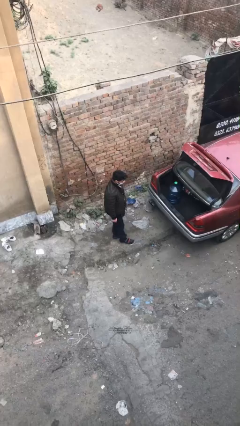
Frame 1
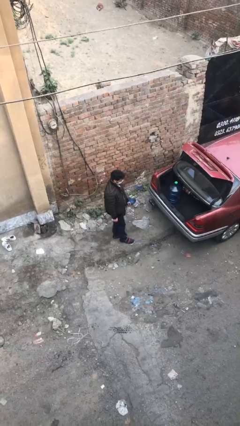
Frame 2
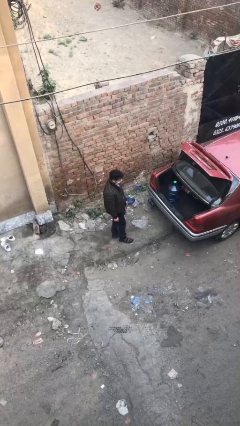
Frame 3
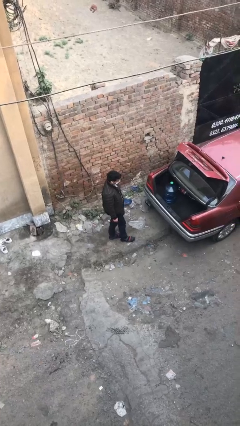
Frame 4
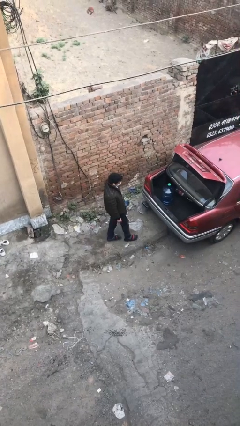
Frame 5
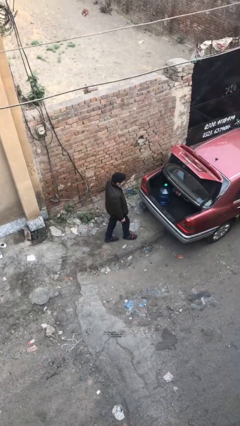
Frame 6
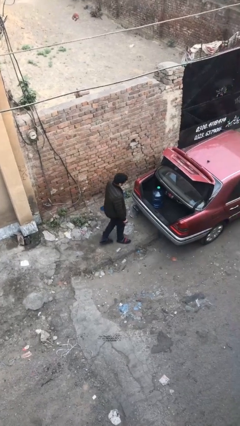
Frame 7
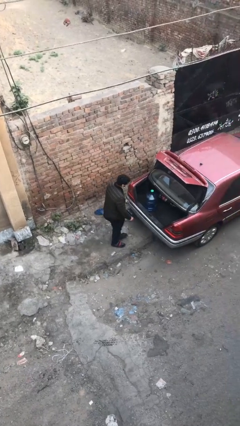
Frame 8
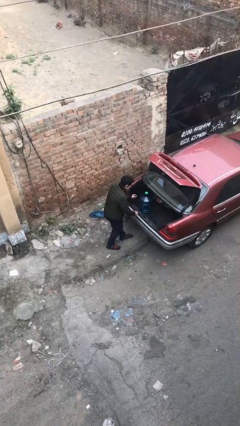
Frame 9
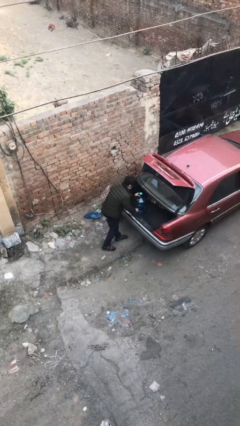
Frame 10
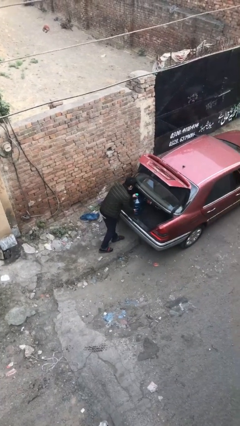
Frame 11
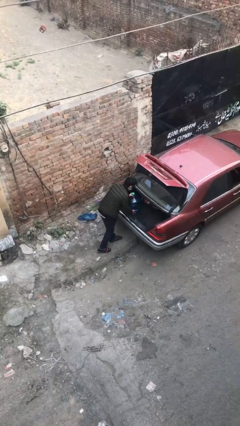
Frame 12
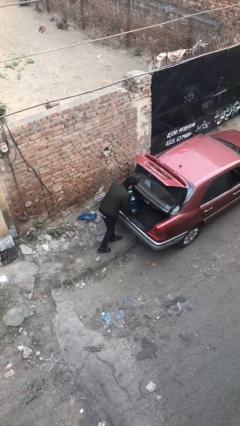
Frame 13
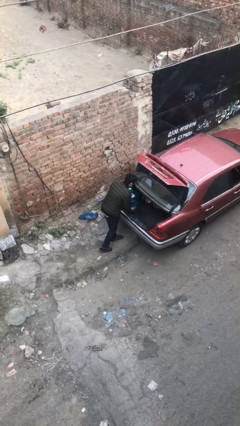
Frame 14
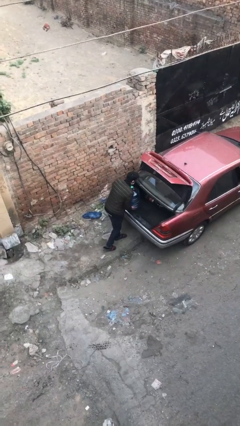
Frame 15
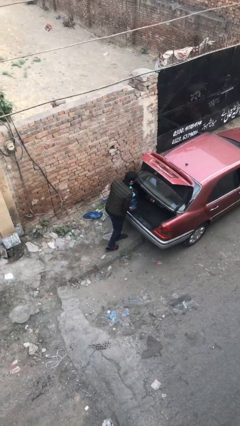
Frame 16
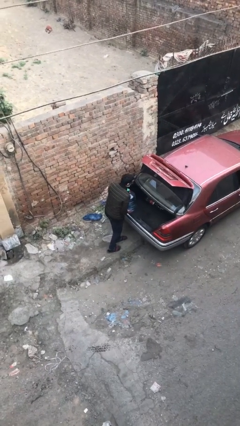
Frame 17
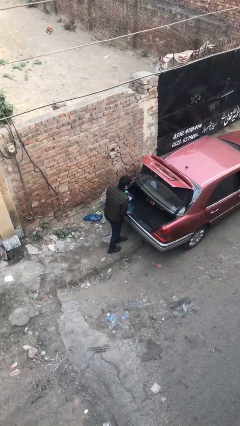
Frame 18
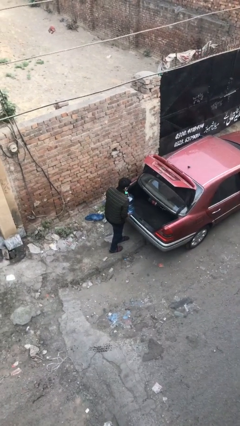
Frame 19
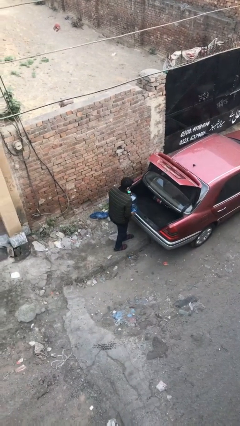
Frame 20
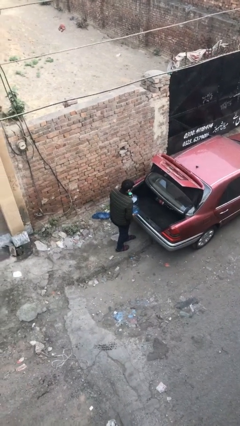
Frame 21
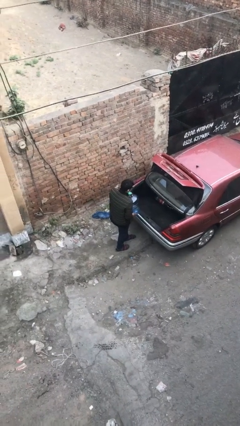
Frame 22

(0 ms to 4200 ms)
person unloads car

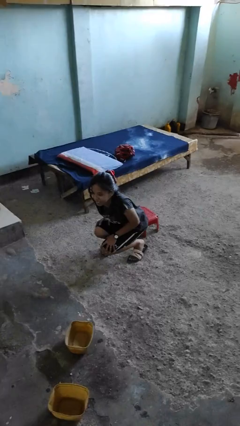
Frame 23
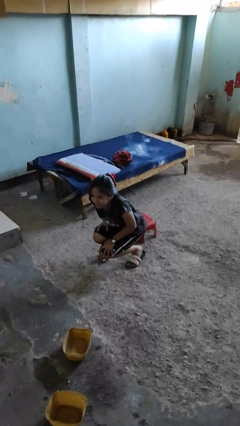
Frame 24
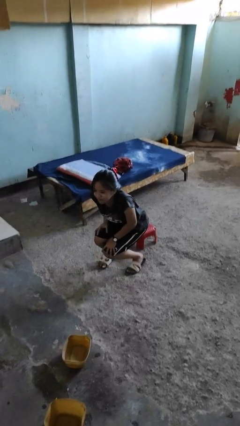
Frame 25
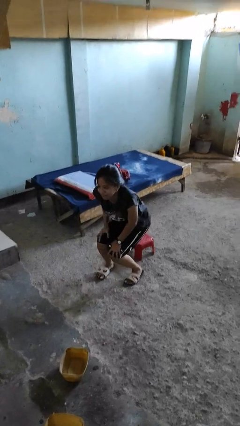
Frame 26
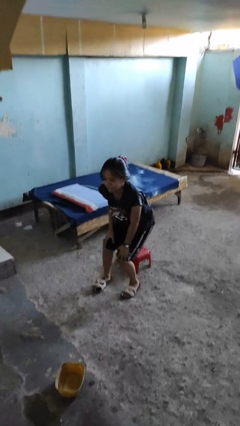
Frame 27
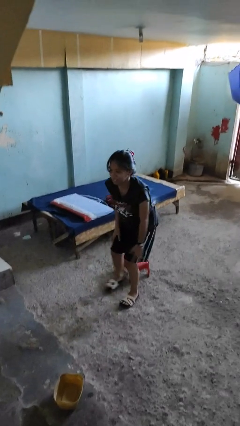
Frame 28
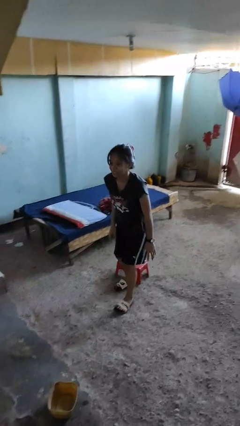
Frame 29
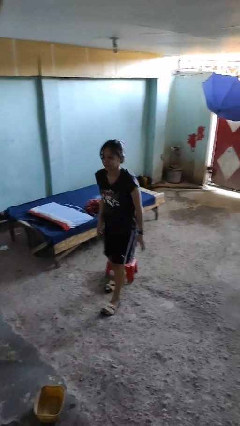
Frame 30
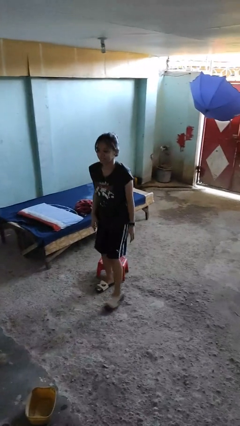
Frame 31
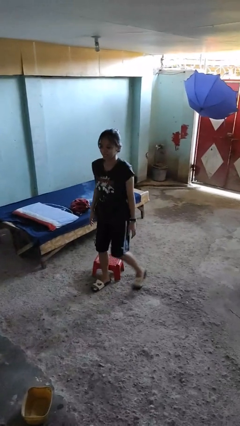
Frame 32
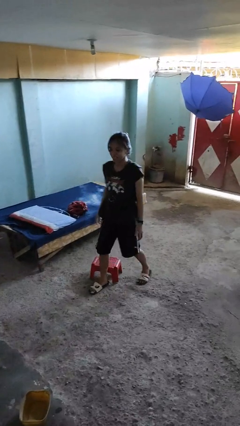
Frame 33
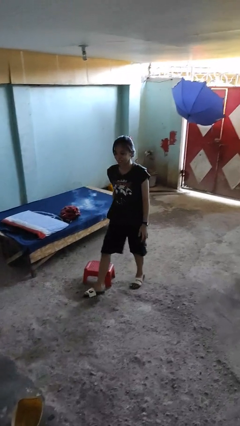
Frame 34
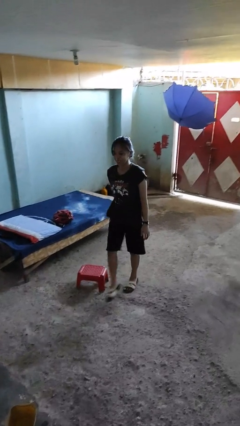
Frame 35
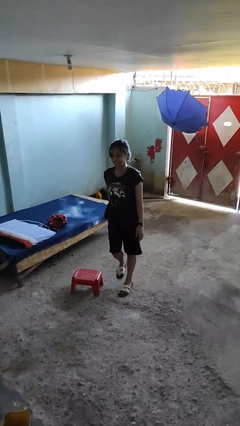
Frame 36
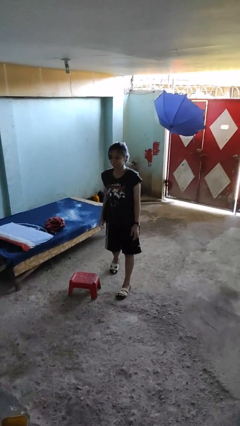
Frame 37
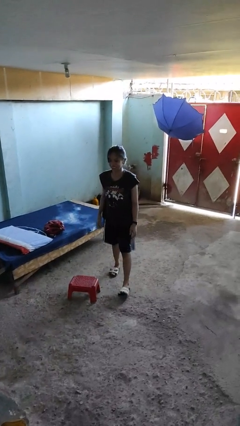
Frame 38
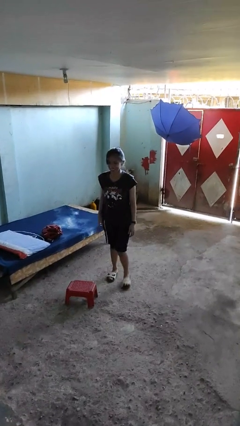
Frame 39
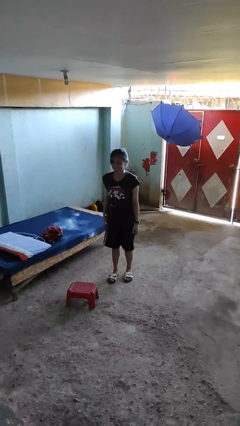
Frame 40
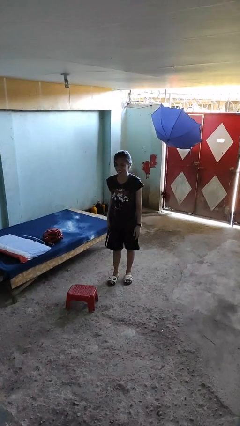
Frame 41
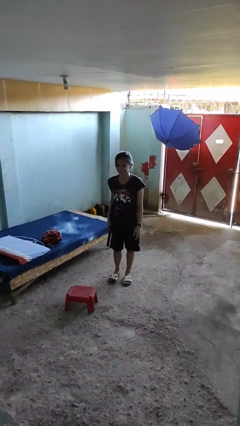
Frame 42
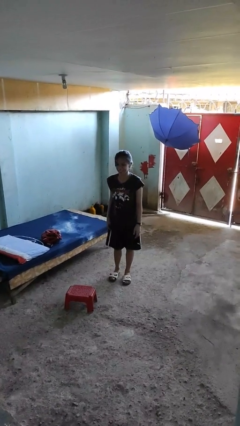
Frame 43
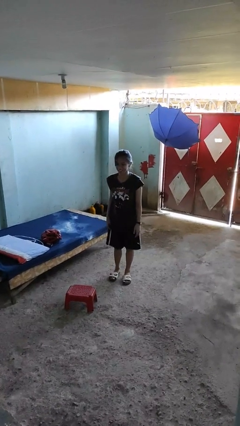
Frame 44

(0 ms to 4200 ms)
person stands up from floor

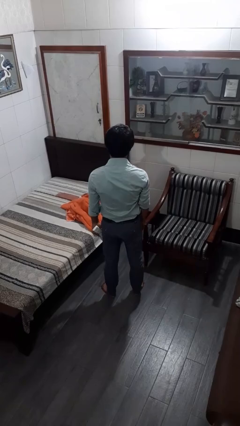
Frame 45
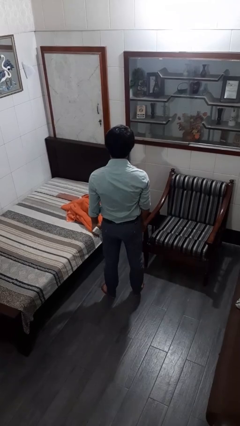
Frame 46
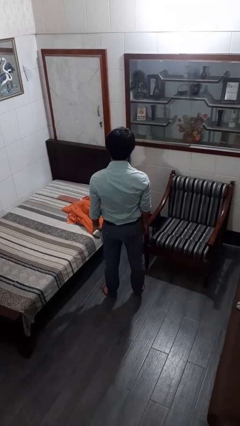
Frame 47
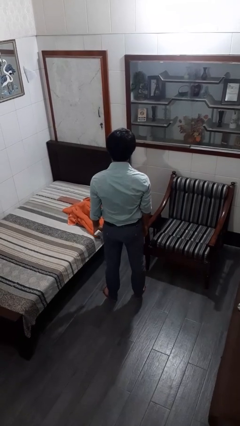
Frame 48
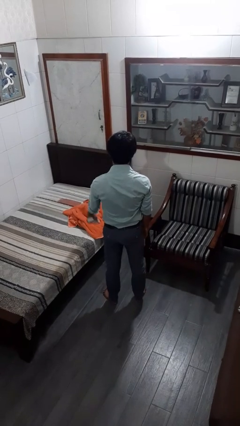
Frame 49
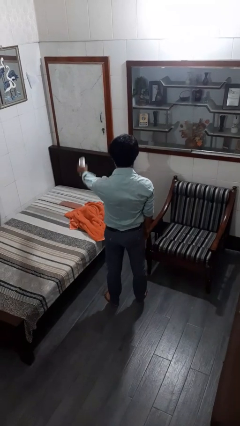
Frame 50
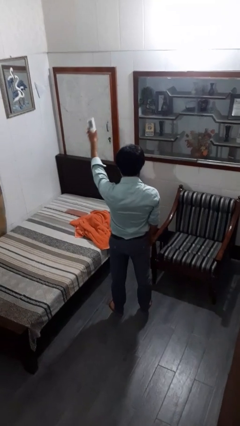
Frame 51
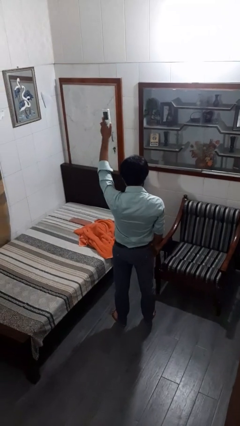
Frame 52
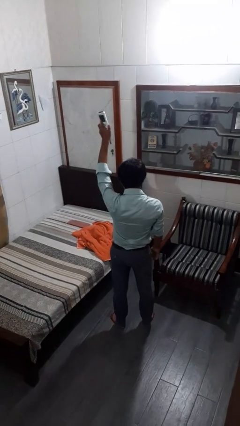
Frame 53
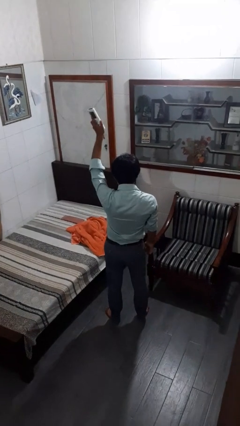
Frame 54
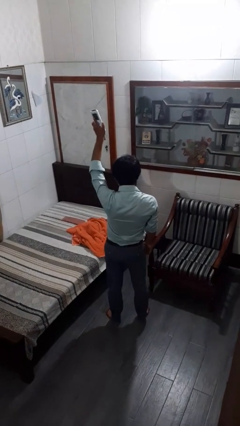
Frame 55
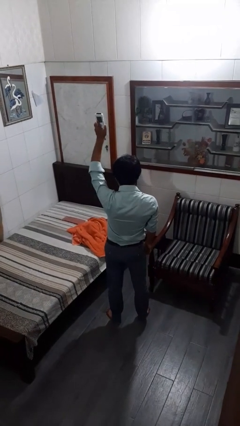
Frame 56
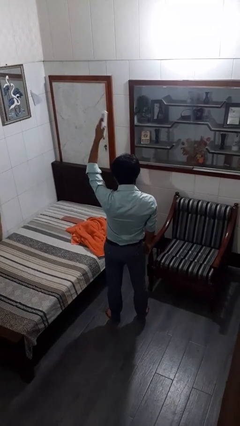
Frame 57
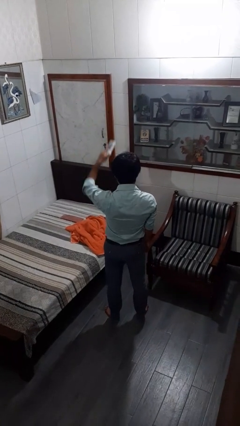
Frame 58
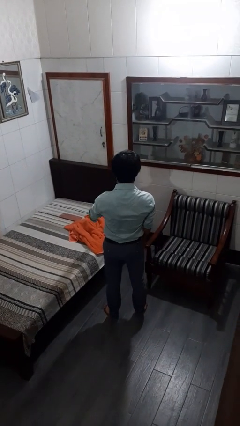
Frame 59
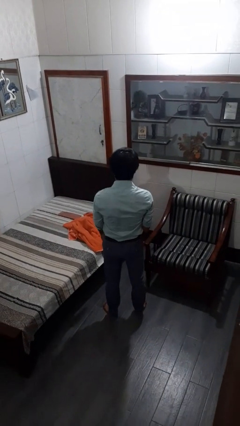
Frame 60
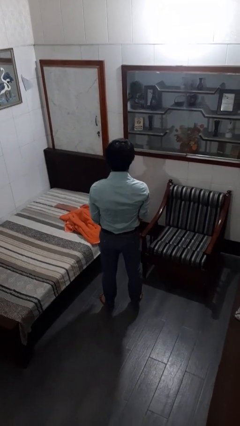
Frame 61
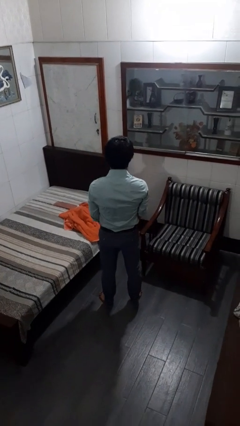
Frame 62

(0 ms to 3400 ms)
person holds object above head

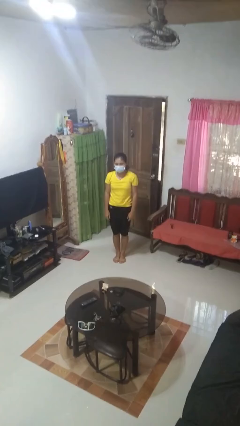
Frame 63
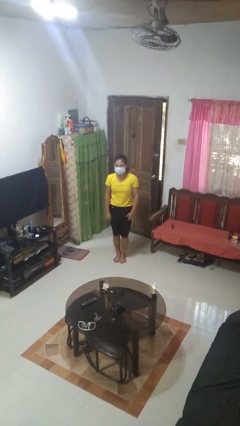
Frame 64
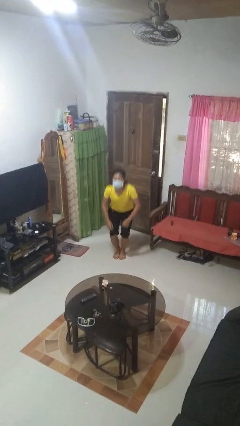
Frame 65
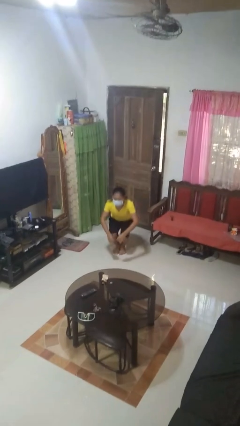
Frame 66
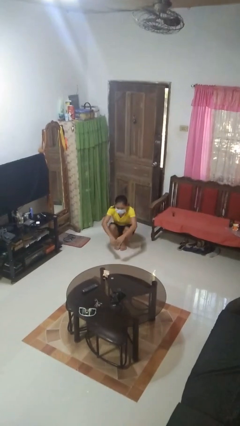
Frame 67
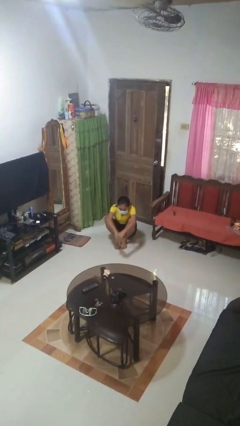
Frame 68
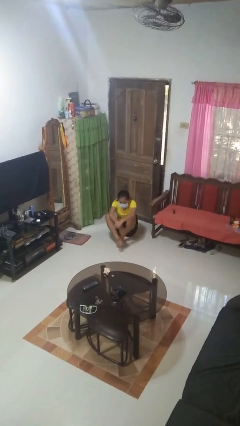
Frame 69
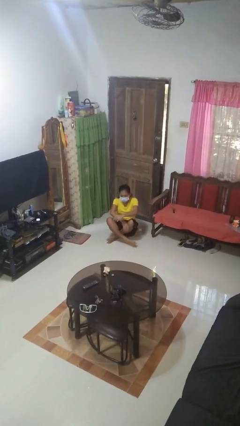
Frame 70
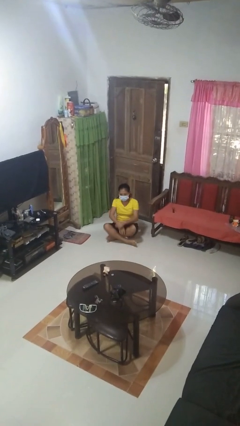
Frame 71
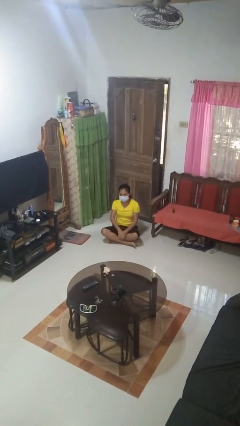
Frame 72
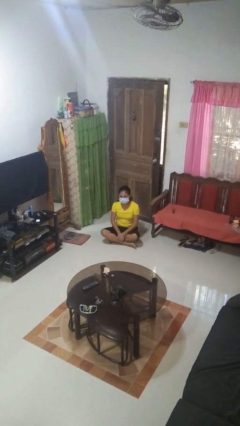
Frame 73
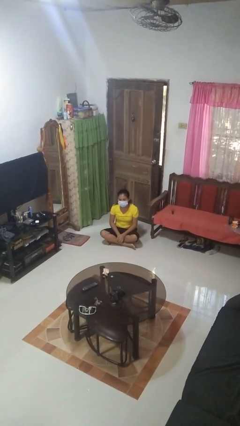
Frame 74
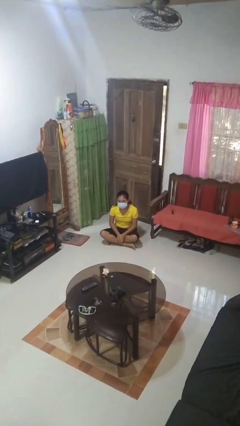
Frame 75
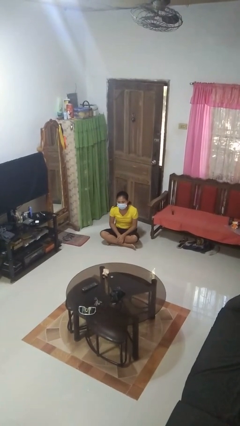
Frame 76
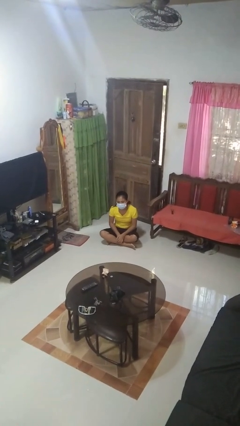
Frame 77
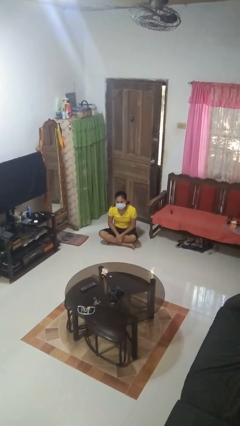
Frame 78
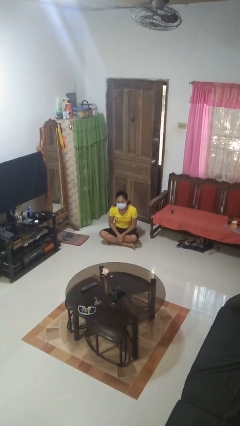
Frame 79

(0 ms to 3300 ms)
person sits crisscross

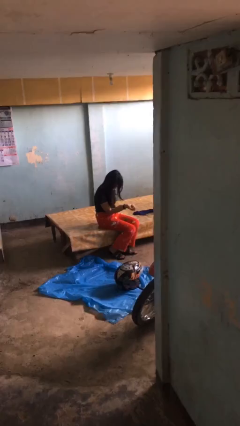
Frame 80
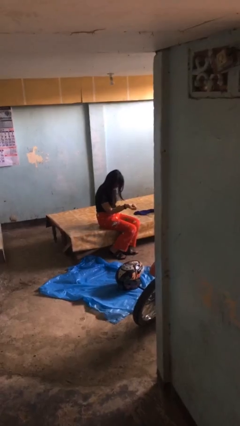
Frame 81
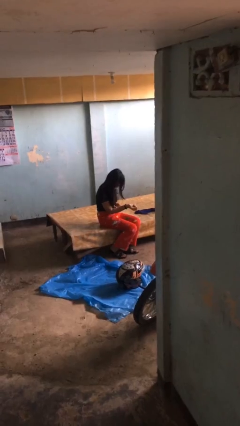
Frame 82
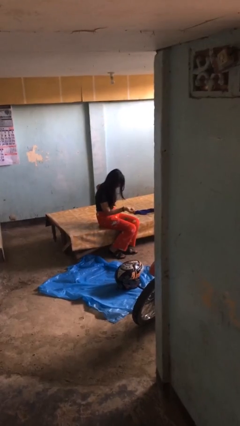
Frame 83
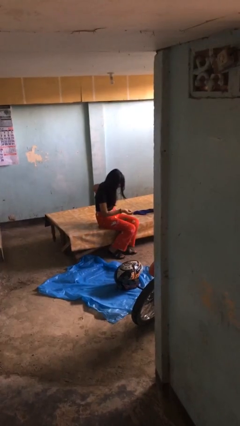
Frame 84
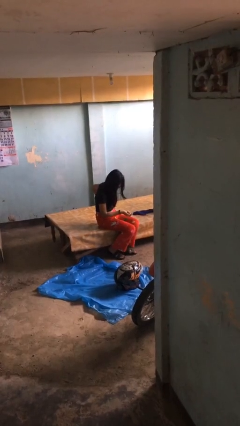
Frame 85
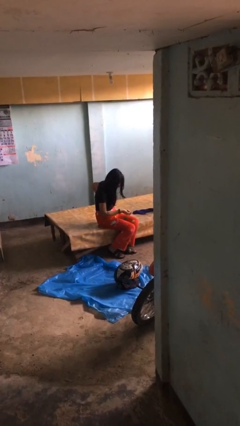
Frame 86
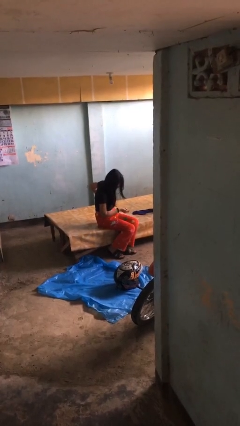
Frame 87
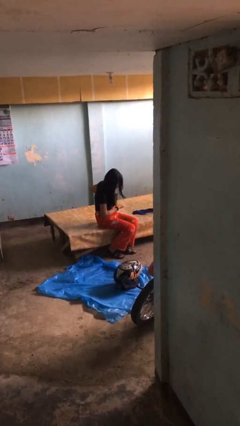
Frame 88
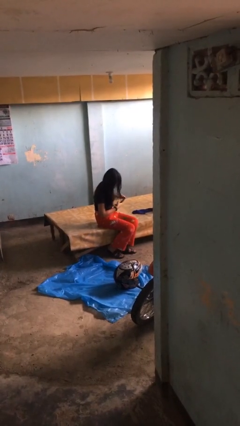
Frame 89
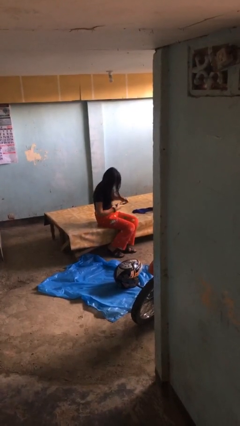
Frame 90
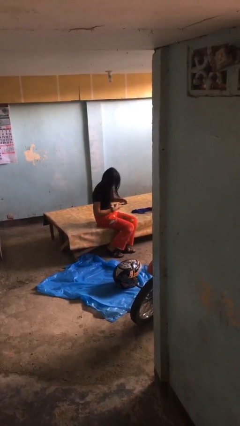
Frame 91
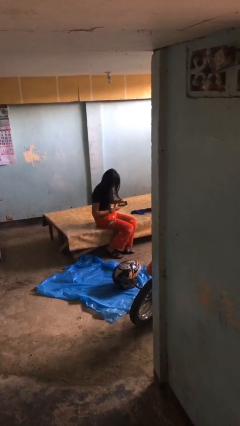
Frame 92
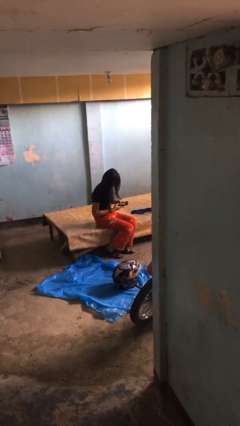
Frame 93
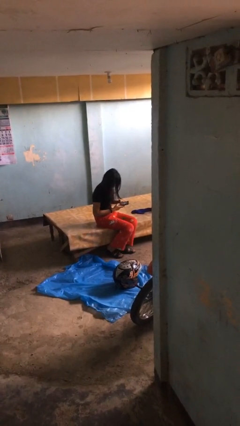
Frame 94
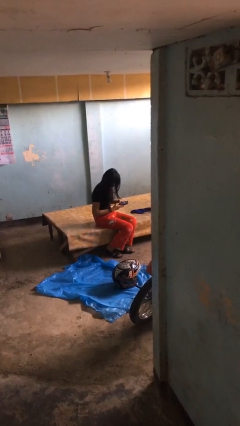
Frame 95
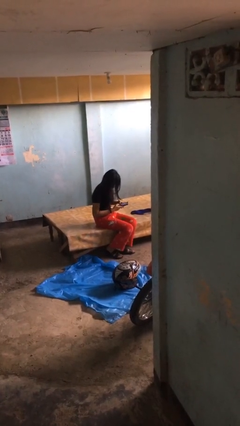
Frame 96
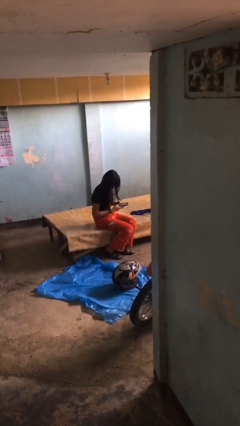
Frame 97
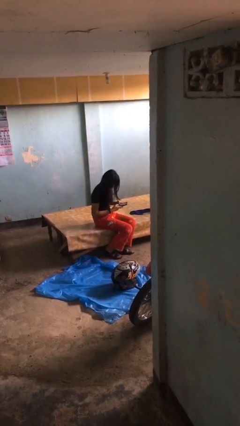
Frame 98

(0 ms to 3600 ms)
person takes phone from pocket
